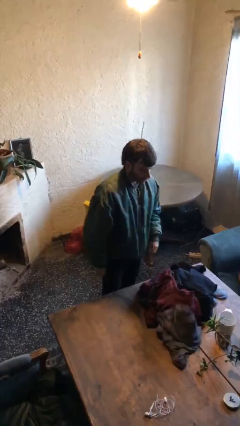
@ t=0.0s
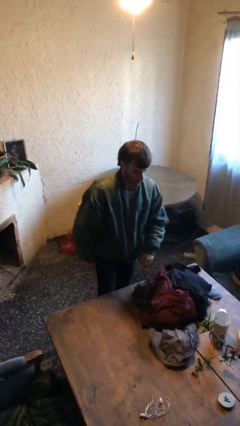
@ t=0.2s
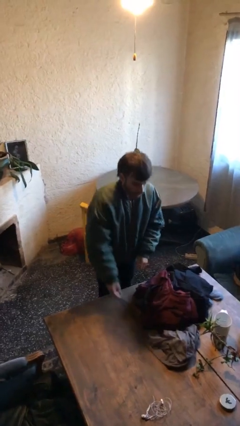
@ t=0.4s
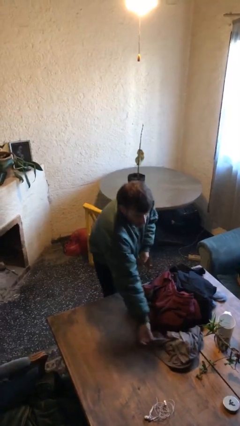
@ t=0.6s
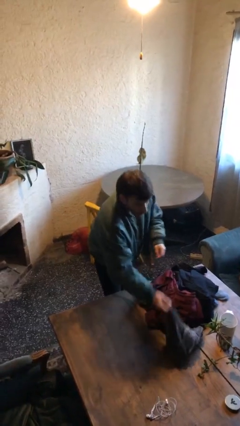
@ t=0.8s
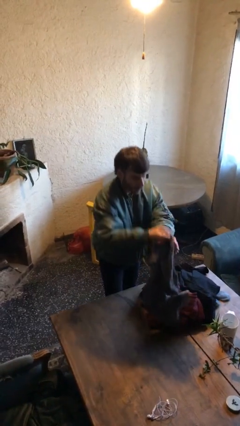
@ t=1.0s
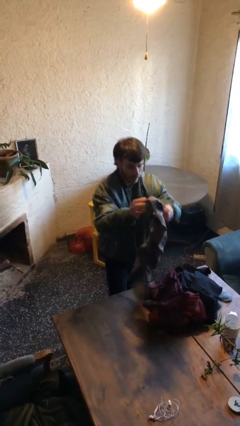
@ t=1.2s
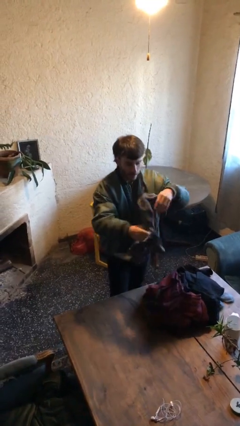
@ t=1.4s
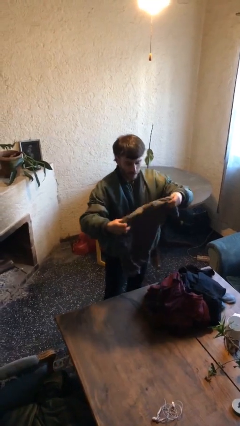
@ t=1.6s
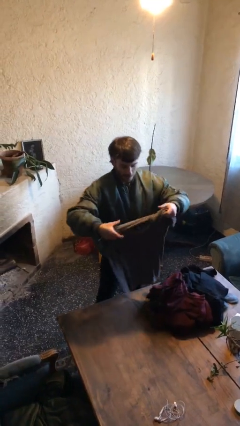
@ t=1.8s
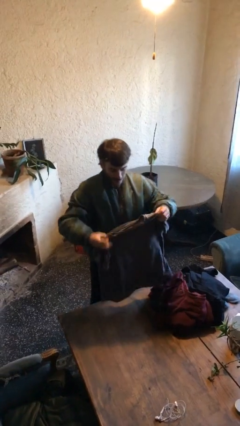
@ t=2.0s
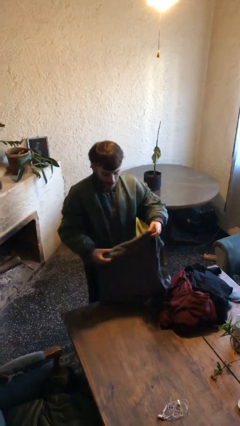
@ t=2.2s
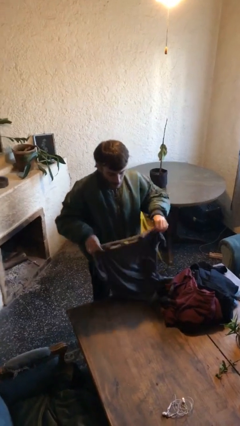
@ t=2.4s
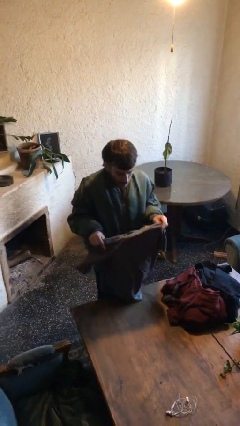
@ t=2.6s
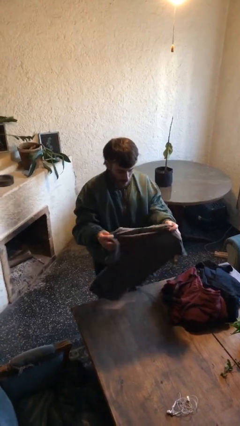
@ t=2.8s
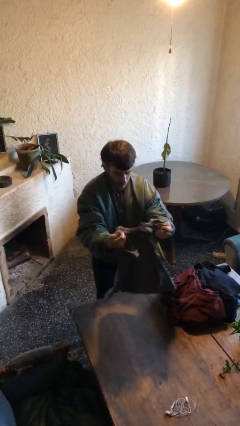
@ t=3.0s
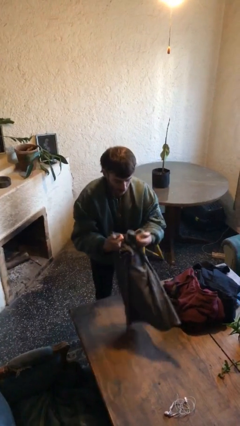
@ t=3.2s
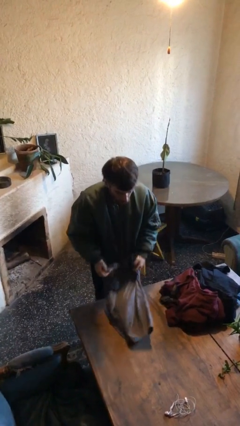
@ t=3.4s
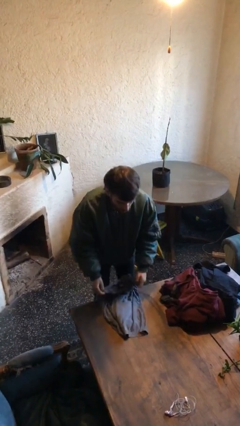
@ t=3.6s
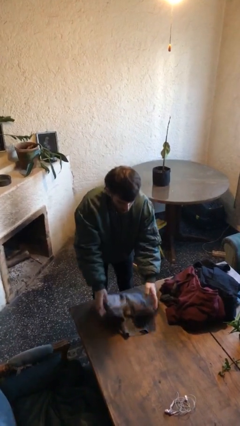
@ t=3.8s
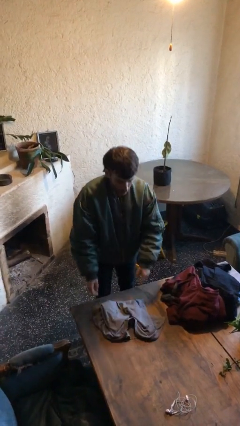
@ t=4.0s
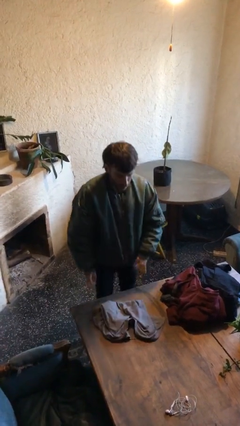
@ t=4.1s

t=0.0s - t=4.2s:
person folds shirt

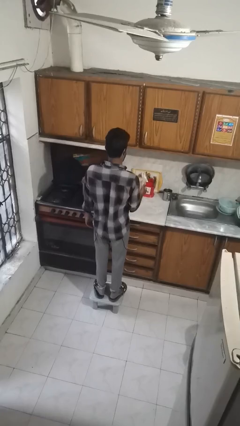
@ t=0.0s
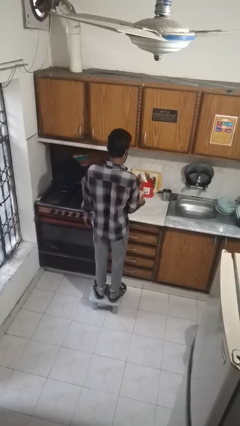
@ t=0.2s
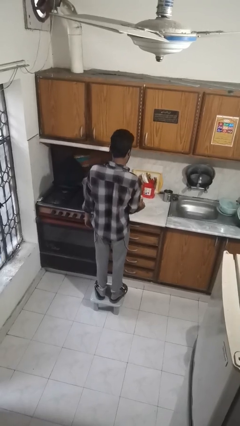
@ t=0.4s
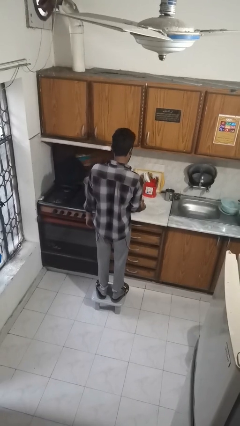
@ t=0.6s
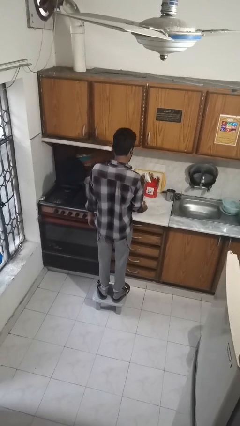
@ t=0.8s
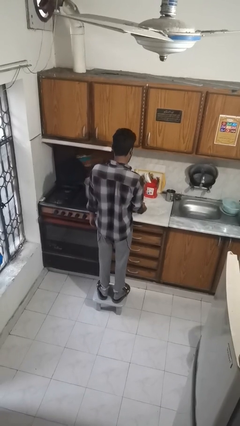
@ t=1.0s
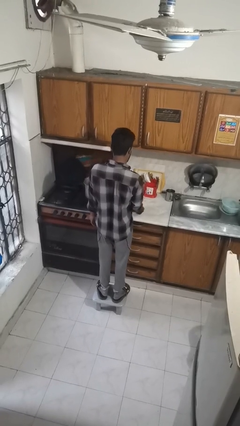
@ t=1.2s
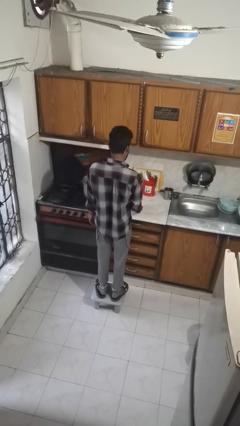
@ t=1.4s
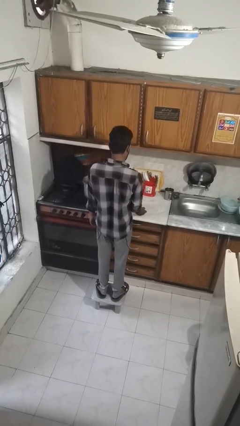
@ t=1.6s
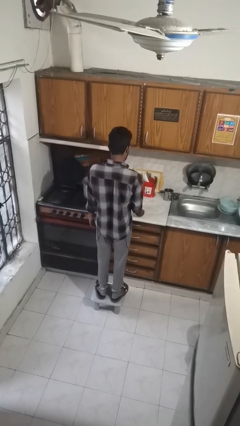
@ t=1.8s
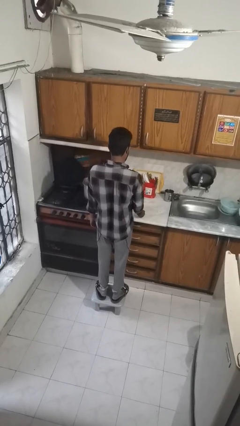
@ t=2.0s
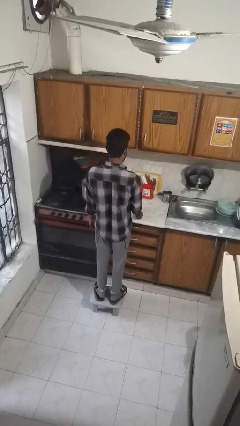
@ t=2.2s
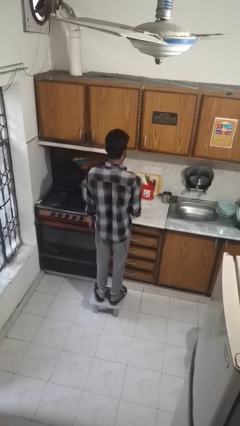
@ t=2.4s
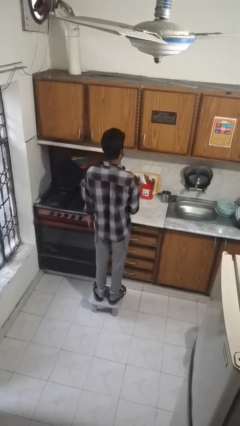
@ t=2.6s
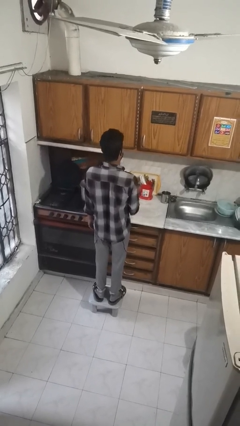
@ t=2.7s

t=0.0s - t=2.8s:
person puts down object on shelf

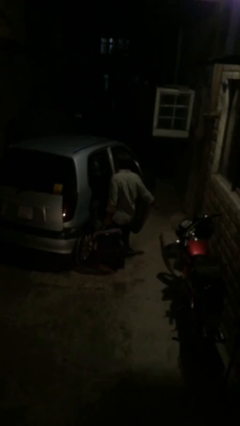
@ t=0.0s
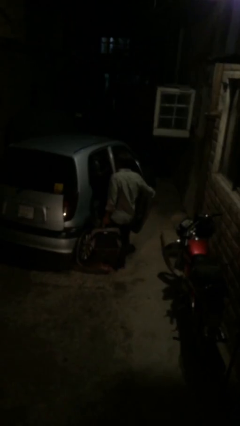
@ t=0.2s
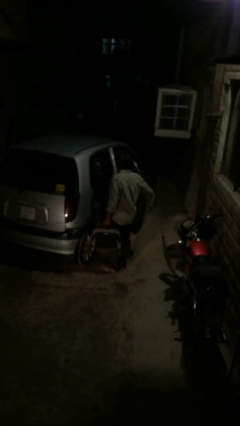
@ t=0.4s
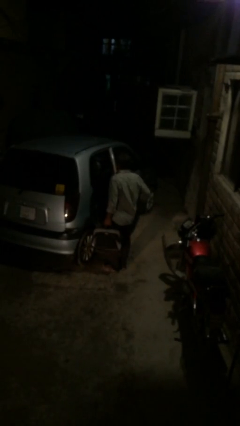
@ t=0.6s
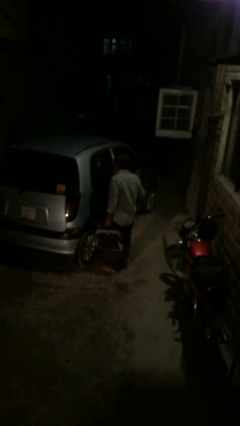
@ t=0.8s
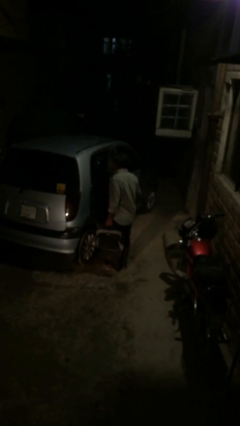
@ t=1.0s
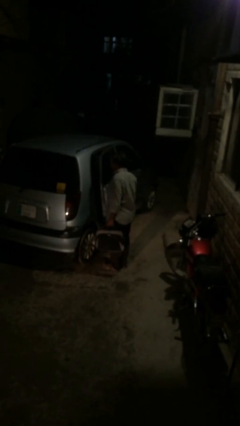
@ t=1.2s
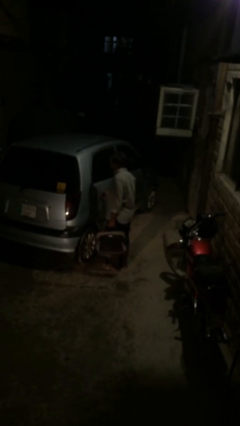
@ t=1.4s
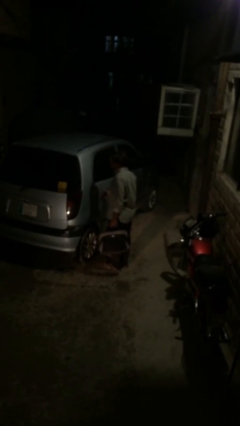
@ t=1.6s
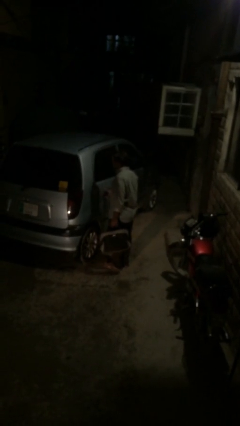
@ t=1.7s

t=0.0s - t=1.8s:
person closes car door

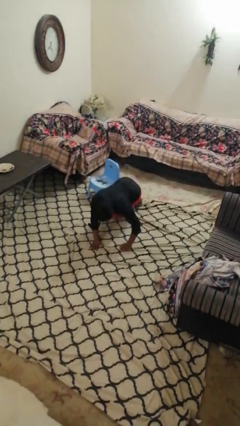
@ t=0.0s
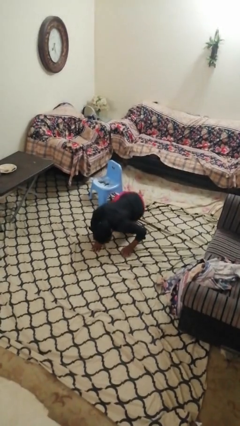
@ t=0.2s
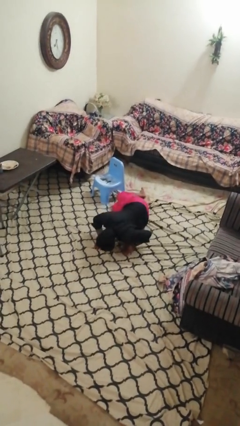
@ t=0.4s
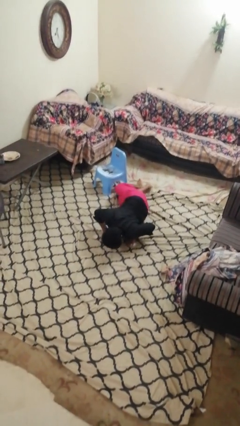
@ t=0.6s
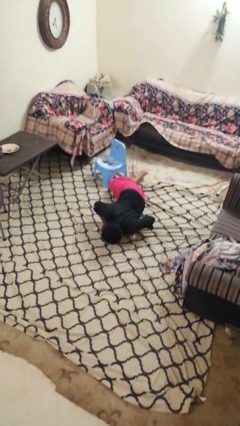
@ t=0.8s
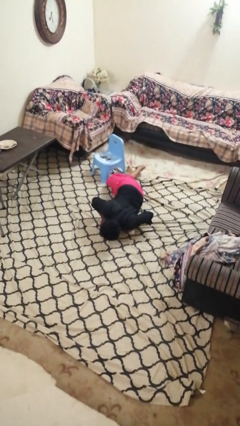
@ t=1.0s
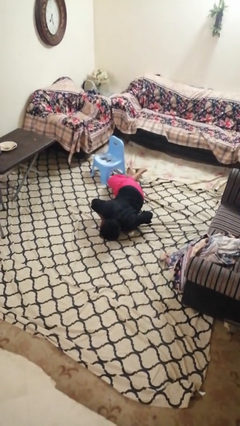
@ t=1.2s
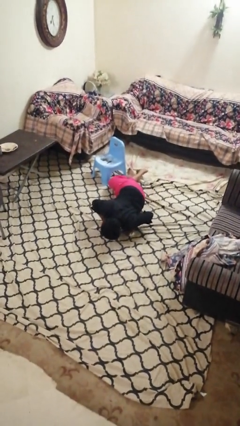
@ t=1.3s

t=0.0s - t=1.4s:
person lies down on floor

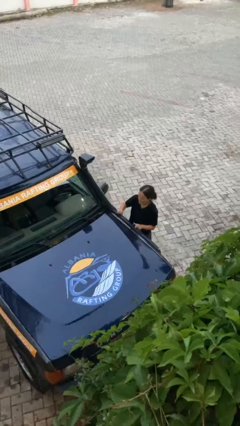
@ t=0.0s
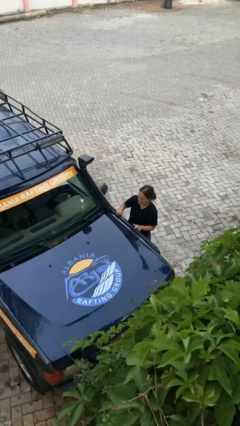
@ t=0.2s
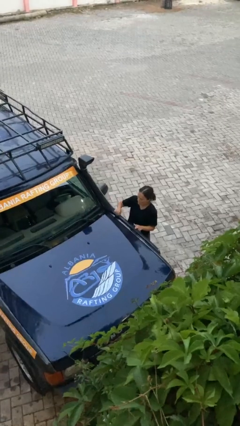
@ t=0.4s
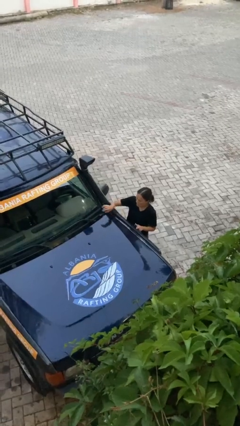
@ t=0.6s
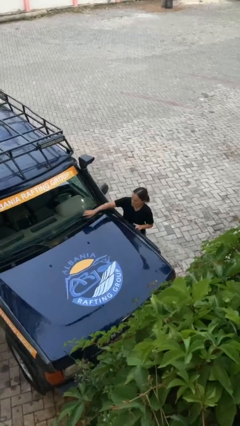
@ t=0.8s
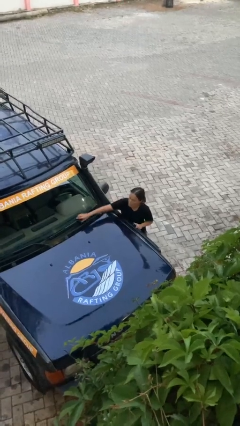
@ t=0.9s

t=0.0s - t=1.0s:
person flips down car wipers

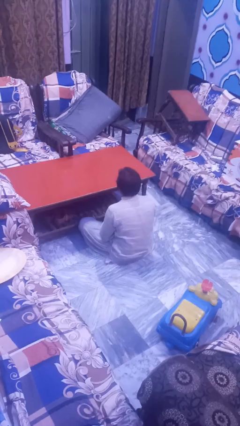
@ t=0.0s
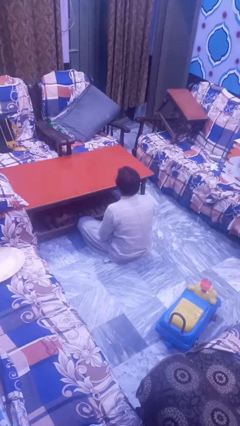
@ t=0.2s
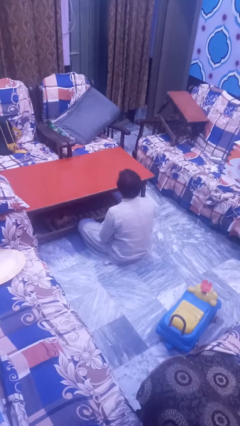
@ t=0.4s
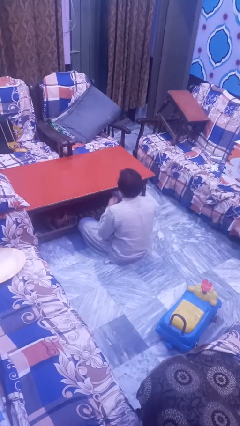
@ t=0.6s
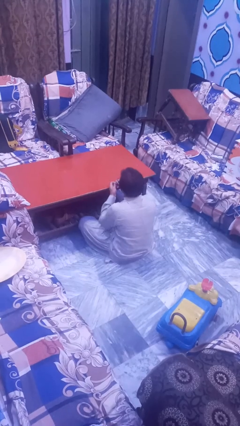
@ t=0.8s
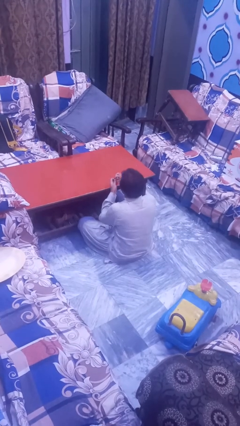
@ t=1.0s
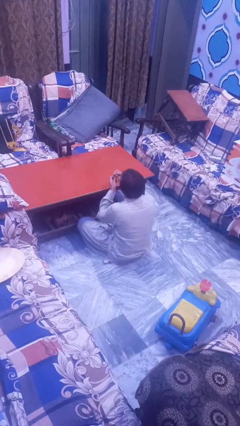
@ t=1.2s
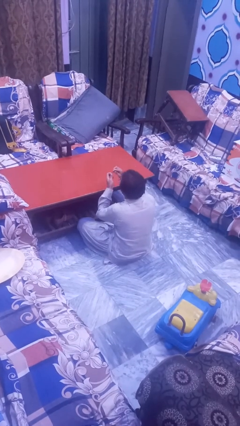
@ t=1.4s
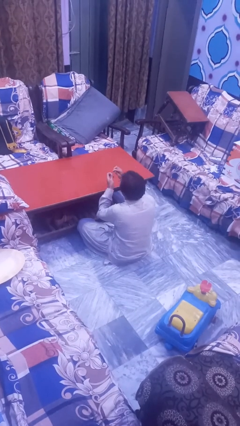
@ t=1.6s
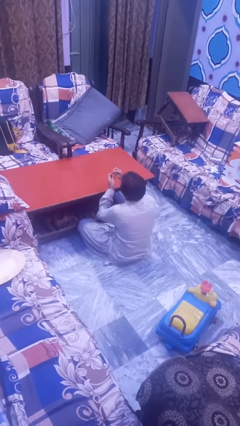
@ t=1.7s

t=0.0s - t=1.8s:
person files fingernails

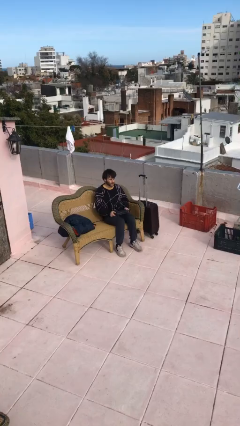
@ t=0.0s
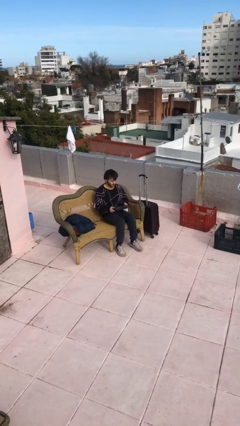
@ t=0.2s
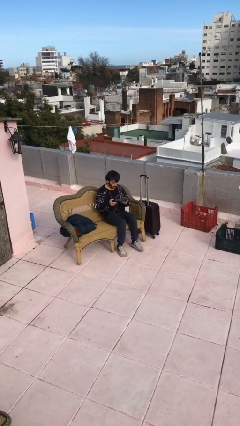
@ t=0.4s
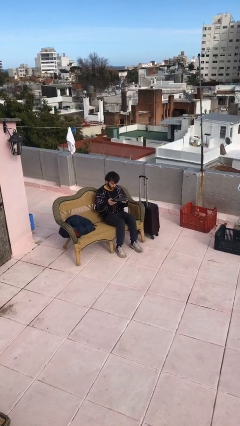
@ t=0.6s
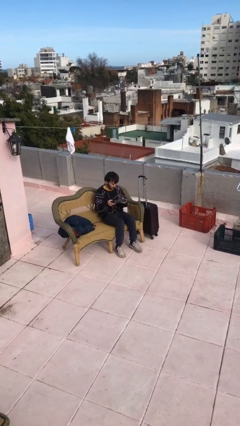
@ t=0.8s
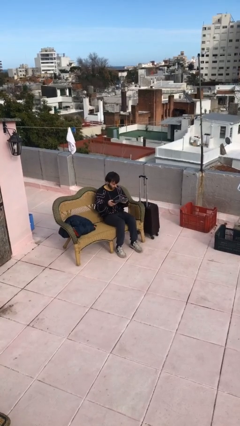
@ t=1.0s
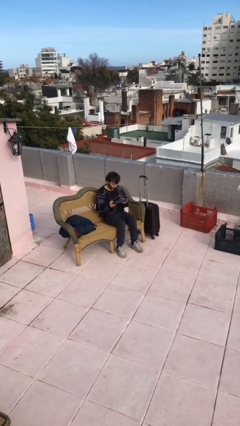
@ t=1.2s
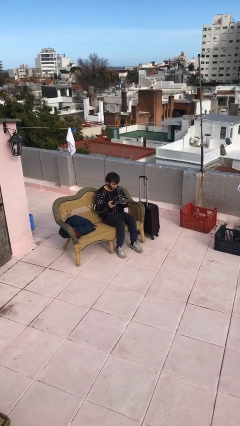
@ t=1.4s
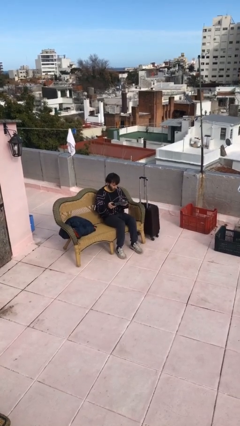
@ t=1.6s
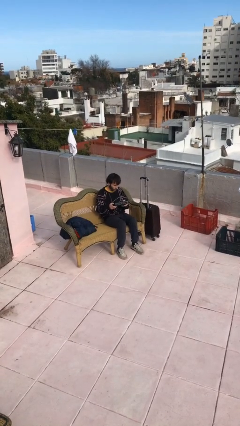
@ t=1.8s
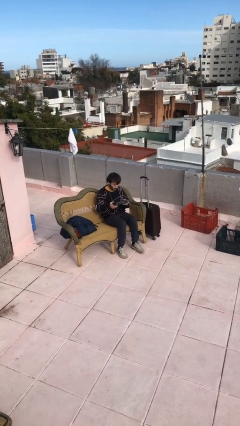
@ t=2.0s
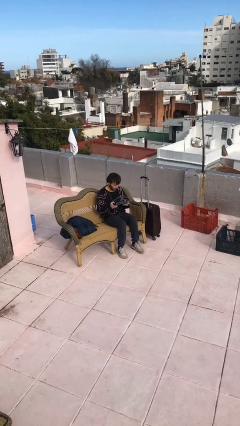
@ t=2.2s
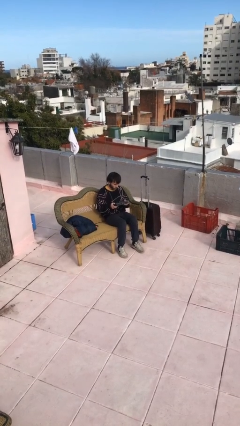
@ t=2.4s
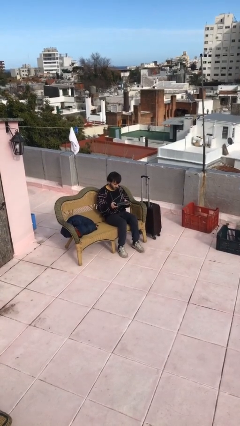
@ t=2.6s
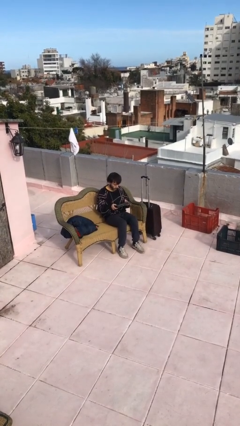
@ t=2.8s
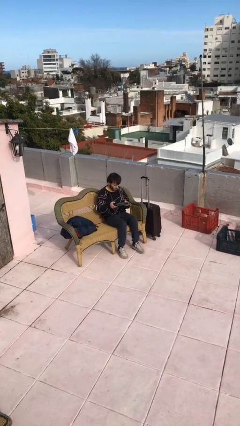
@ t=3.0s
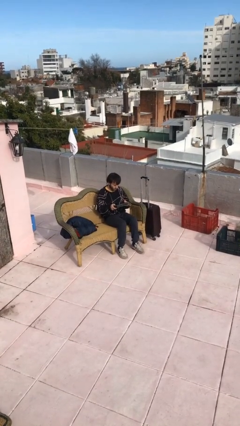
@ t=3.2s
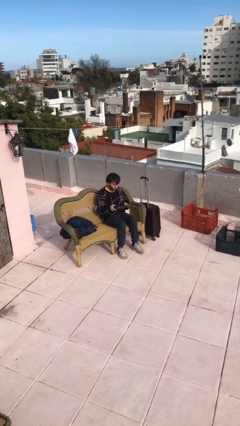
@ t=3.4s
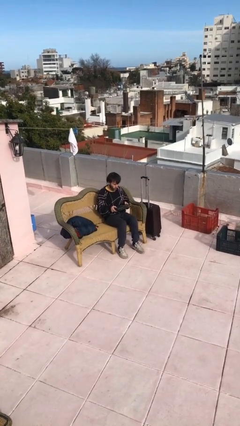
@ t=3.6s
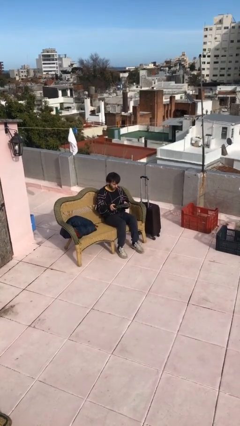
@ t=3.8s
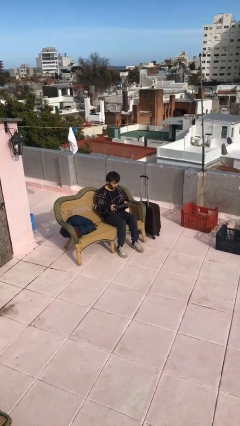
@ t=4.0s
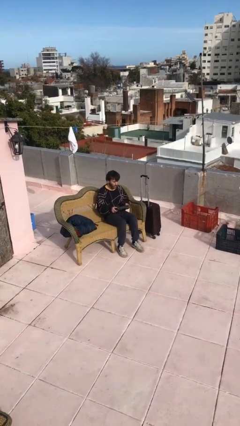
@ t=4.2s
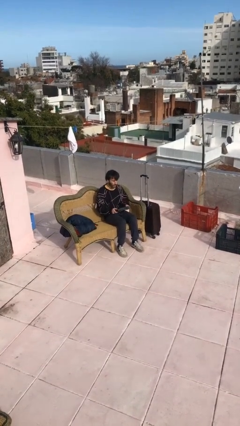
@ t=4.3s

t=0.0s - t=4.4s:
person interacts with handheld game
